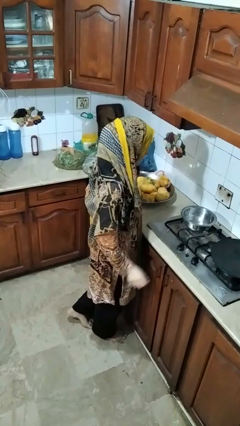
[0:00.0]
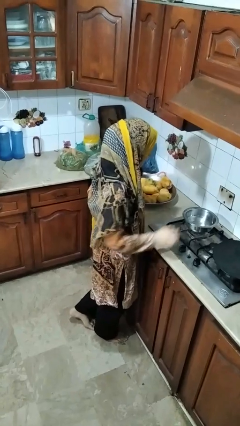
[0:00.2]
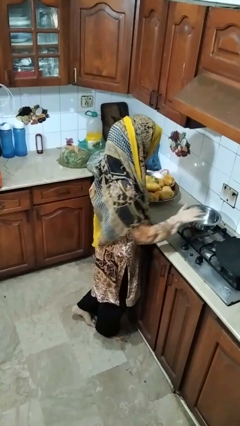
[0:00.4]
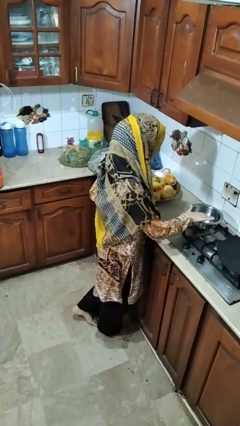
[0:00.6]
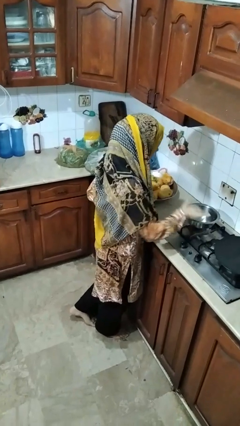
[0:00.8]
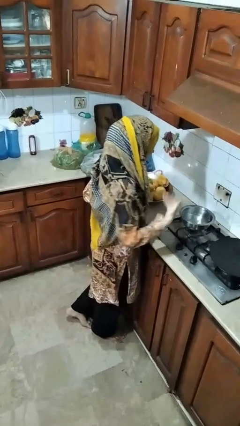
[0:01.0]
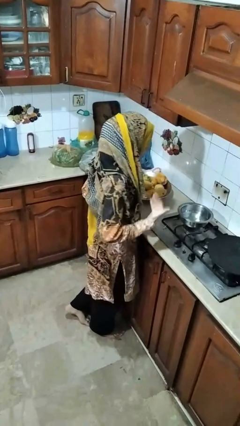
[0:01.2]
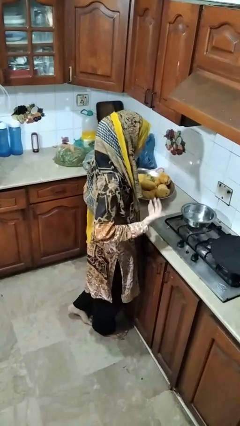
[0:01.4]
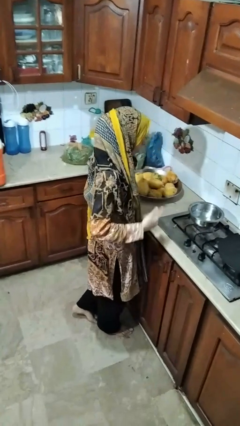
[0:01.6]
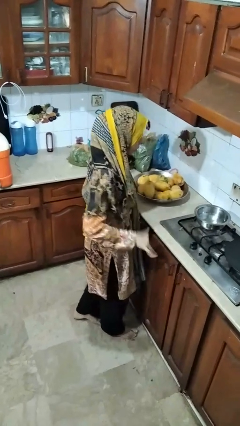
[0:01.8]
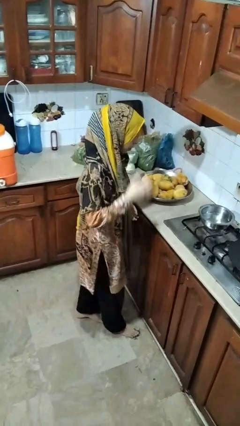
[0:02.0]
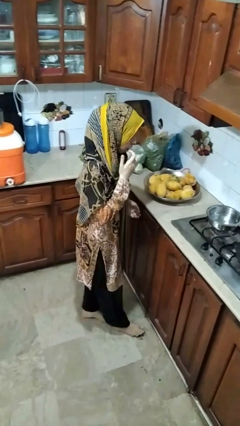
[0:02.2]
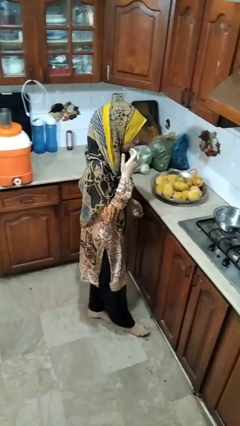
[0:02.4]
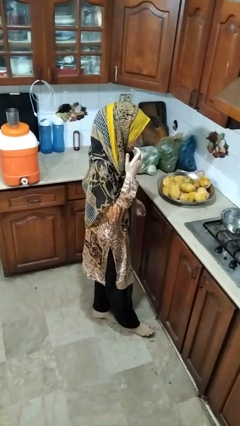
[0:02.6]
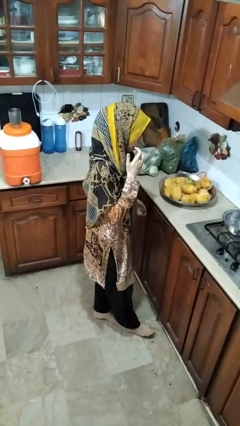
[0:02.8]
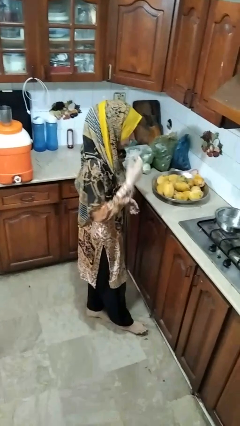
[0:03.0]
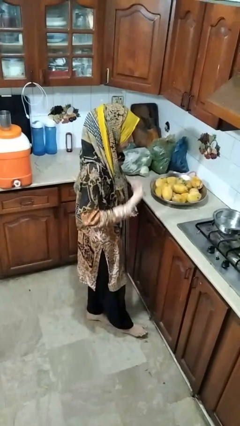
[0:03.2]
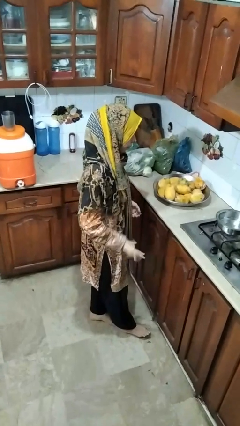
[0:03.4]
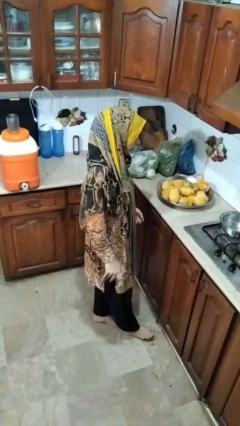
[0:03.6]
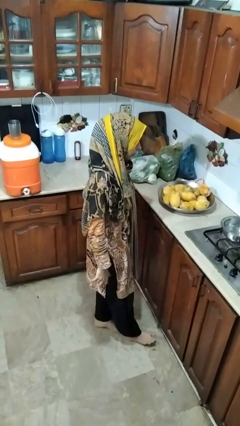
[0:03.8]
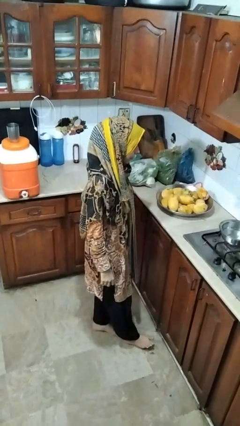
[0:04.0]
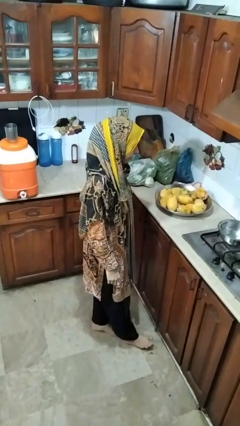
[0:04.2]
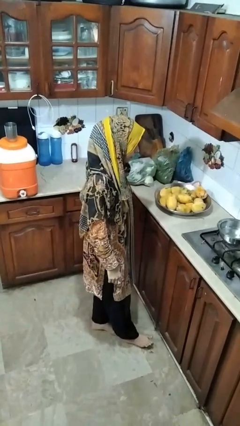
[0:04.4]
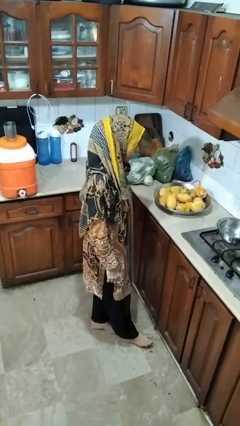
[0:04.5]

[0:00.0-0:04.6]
person burns hand

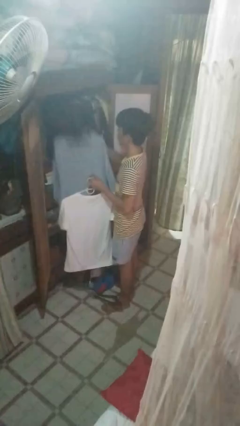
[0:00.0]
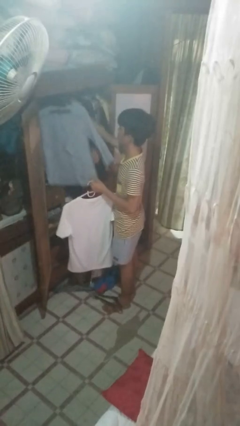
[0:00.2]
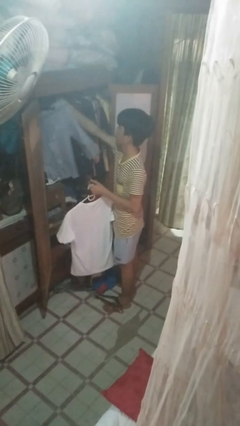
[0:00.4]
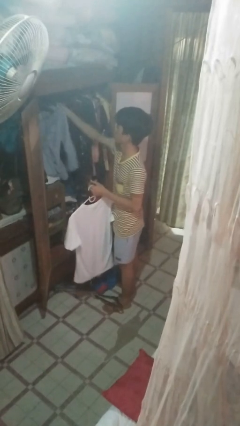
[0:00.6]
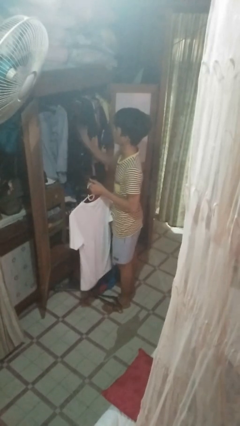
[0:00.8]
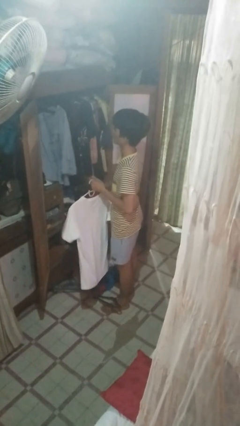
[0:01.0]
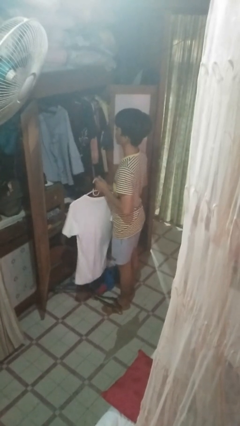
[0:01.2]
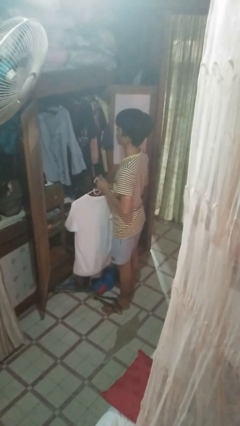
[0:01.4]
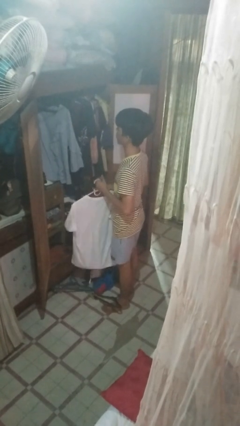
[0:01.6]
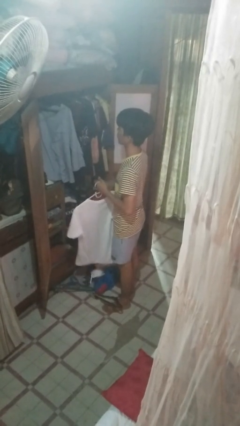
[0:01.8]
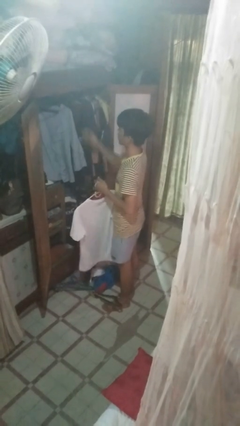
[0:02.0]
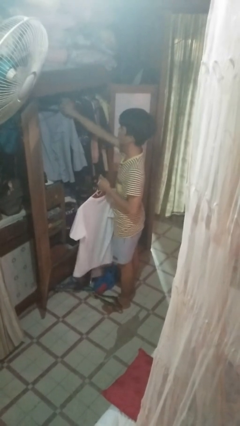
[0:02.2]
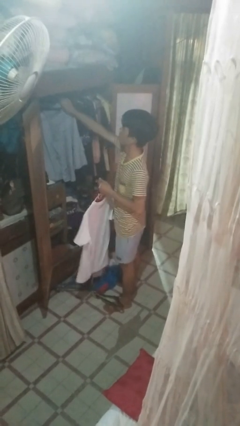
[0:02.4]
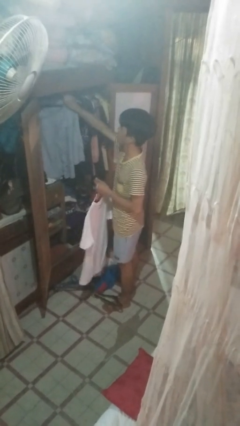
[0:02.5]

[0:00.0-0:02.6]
person puts clothes into closet

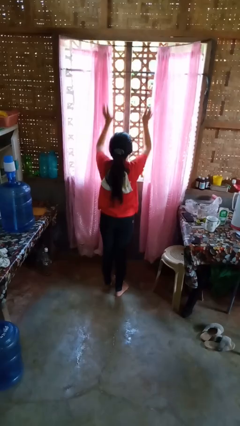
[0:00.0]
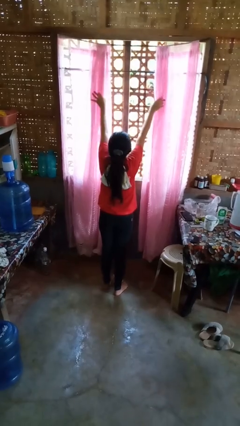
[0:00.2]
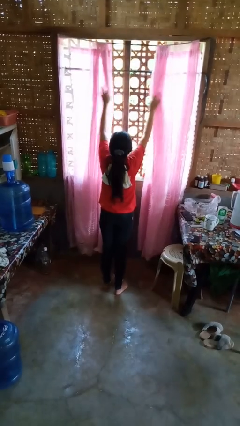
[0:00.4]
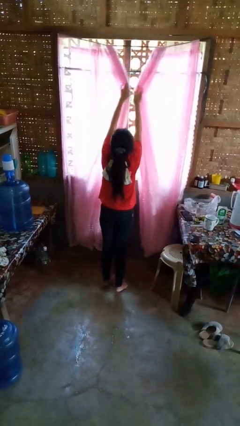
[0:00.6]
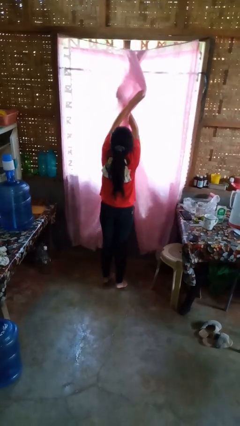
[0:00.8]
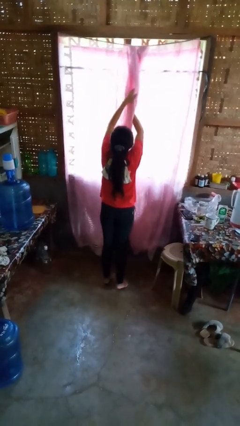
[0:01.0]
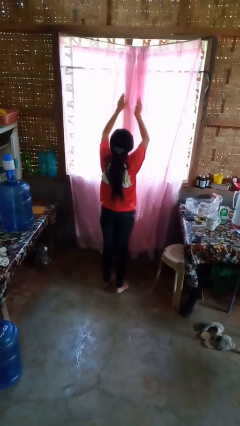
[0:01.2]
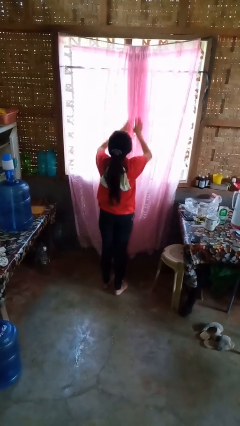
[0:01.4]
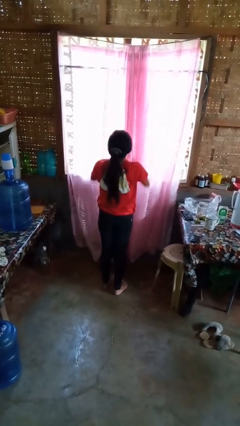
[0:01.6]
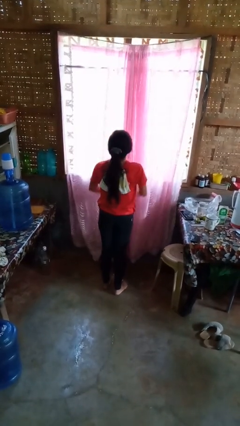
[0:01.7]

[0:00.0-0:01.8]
person closes curtains

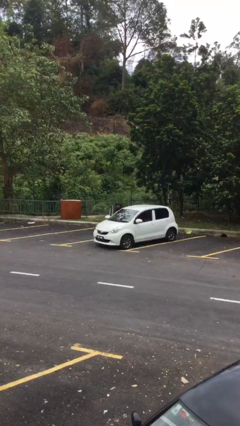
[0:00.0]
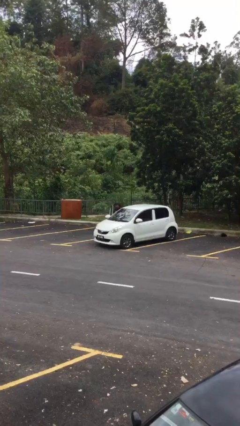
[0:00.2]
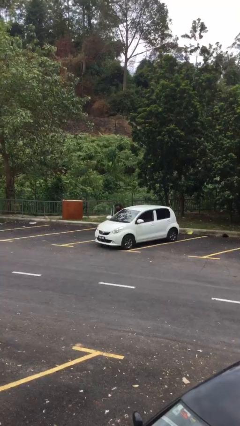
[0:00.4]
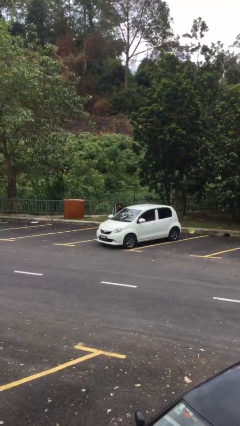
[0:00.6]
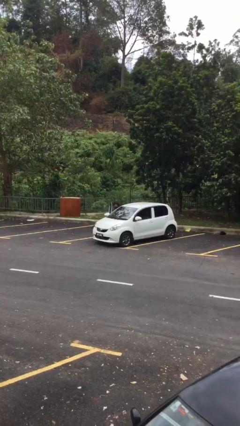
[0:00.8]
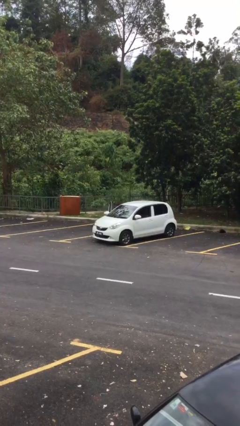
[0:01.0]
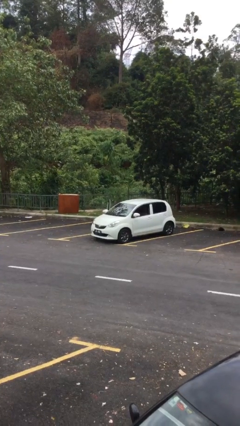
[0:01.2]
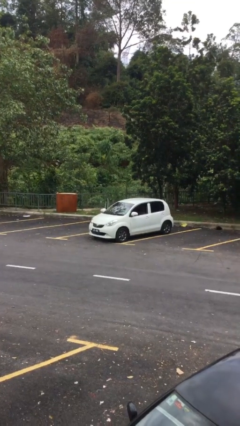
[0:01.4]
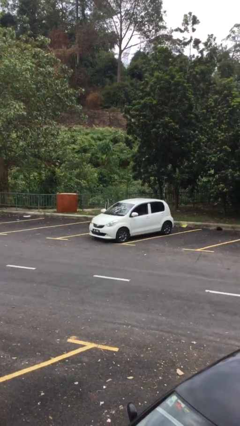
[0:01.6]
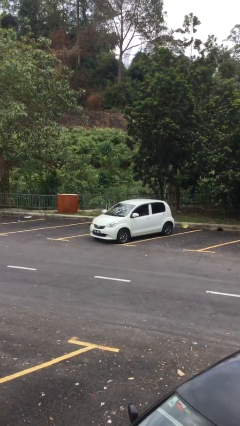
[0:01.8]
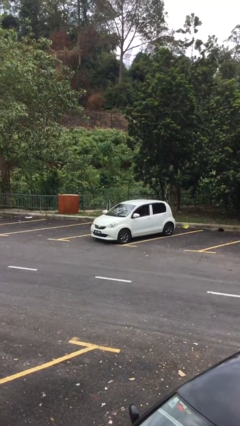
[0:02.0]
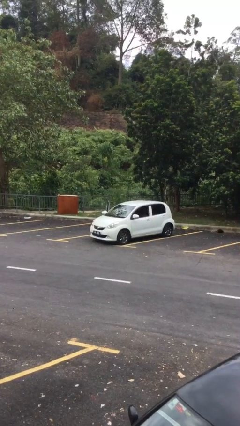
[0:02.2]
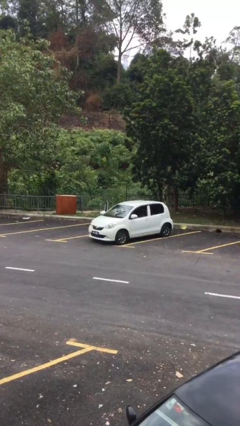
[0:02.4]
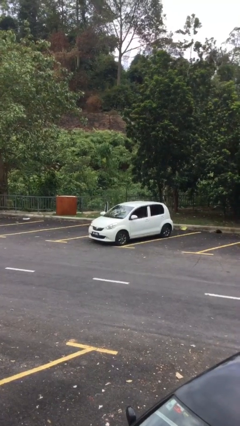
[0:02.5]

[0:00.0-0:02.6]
person enters car

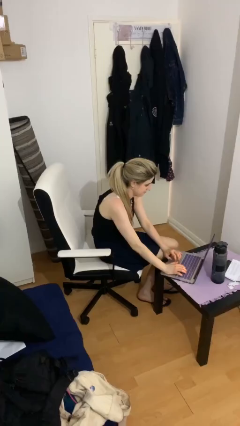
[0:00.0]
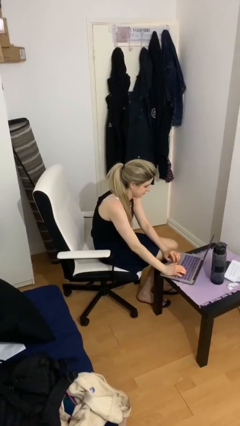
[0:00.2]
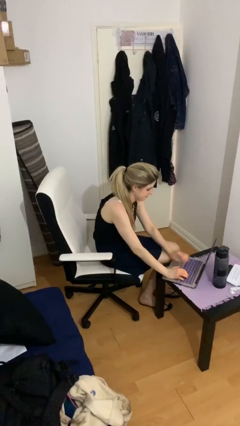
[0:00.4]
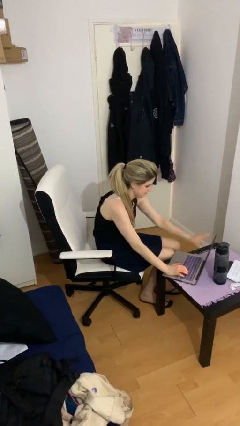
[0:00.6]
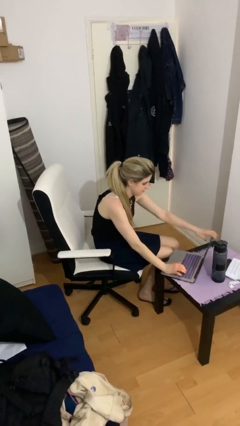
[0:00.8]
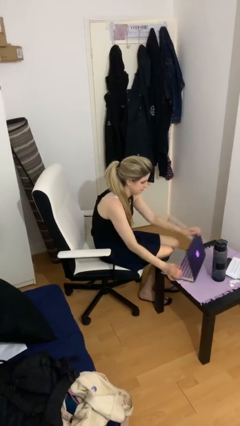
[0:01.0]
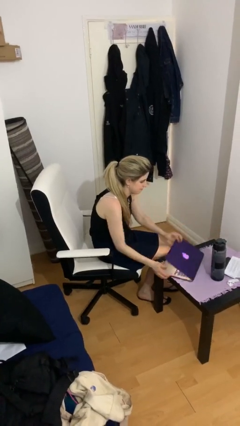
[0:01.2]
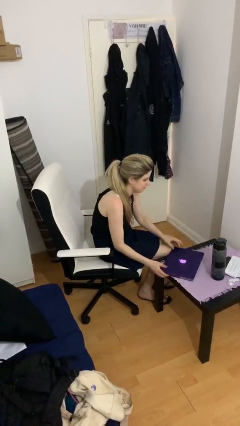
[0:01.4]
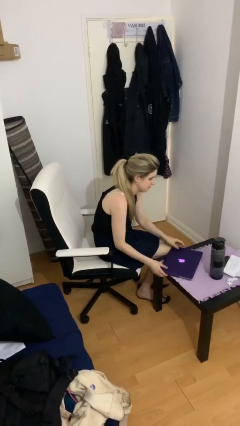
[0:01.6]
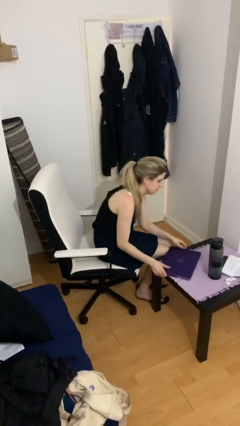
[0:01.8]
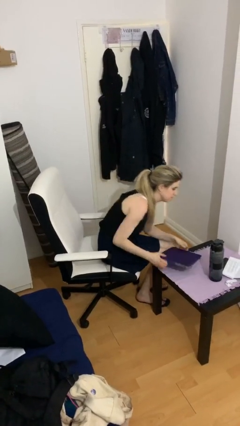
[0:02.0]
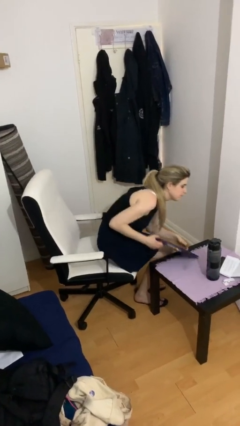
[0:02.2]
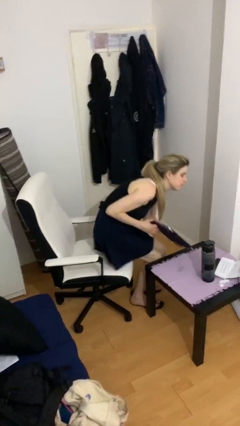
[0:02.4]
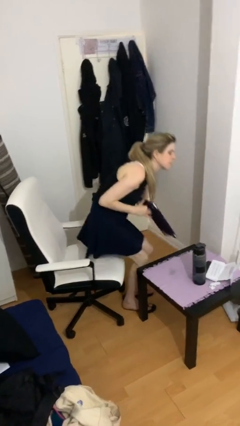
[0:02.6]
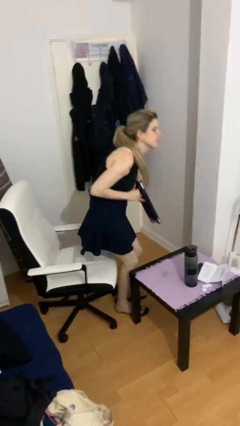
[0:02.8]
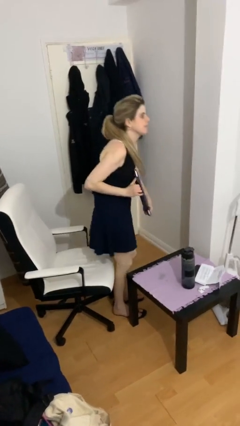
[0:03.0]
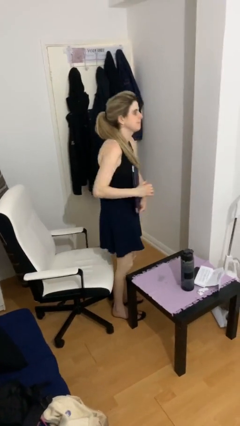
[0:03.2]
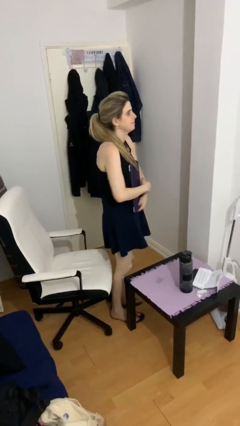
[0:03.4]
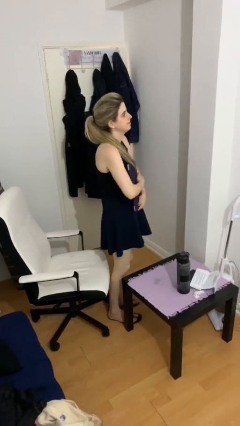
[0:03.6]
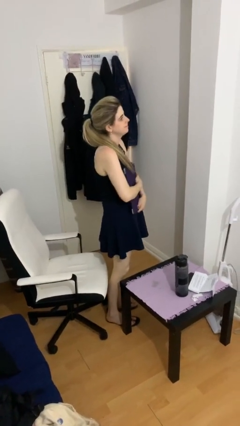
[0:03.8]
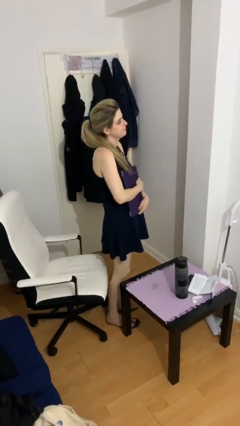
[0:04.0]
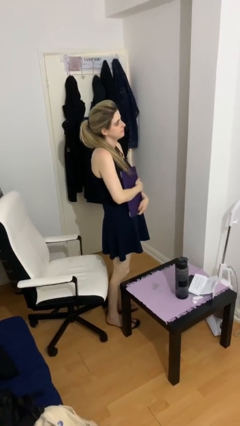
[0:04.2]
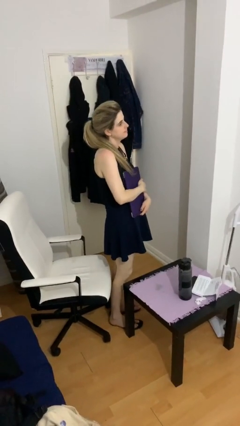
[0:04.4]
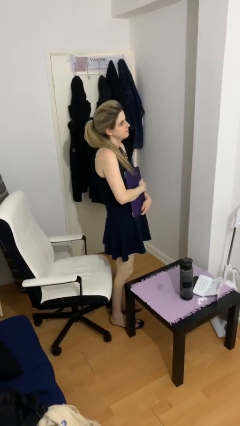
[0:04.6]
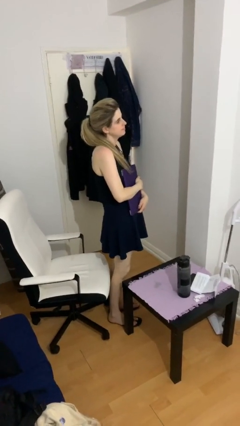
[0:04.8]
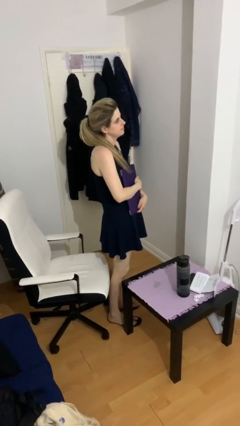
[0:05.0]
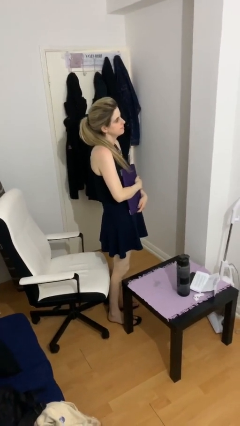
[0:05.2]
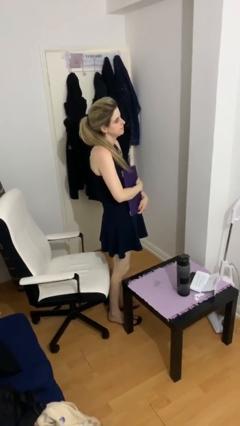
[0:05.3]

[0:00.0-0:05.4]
person stands up

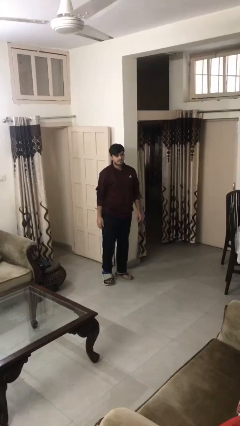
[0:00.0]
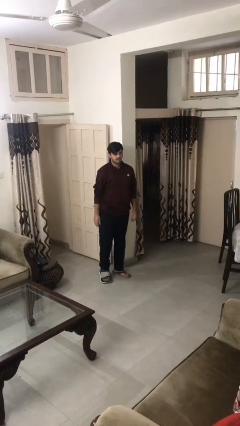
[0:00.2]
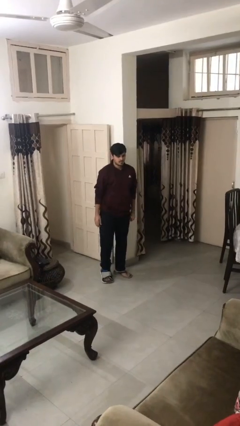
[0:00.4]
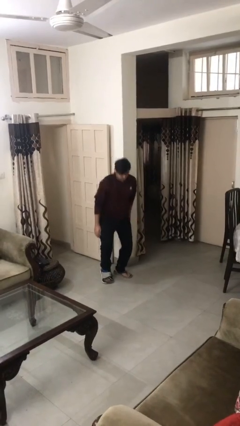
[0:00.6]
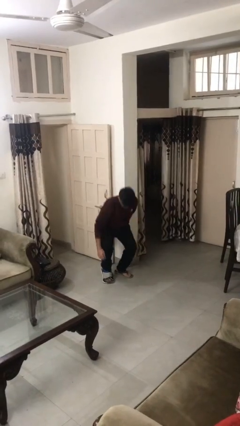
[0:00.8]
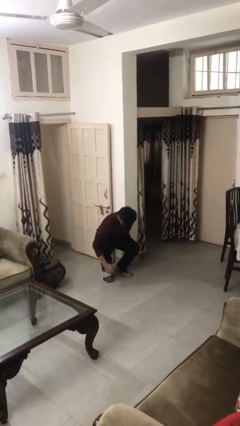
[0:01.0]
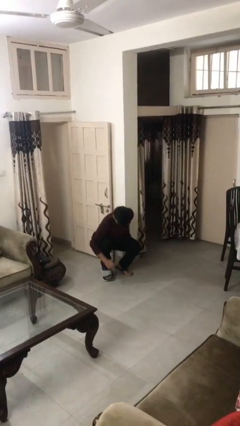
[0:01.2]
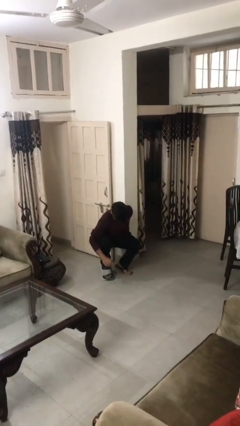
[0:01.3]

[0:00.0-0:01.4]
person sits down
